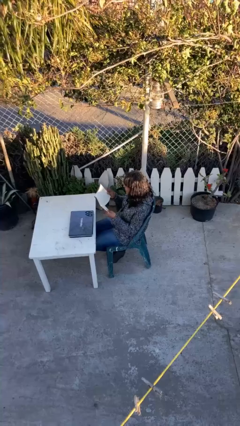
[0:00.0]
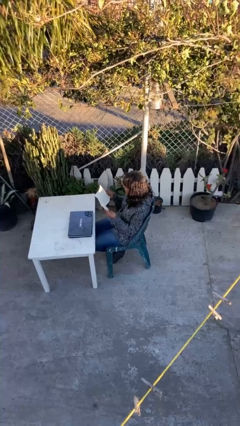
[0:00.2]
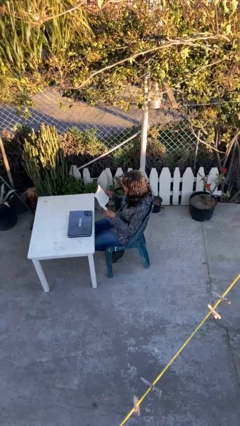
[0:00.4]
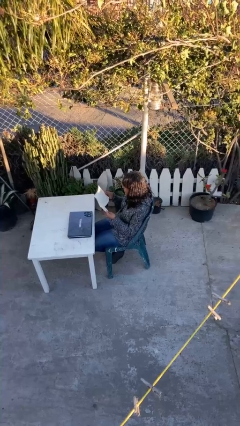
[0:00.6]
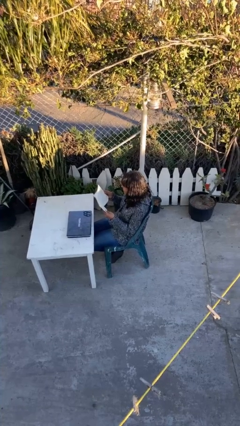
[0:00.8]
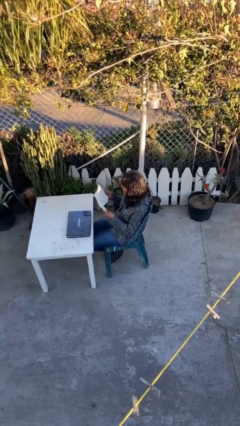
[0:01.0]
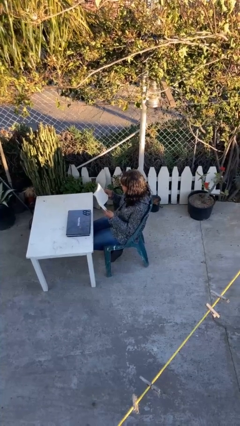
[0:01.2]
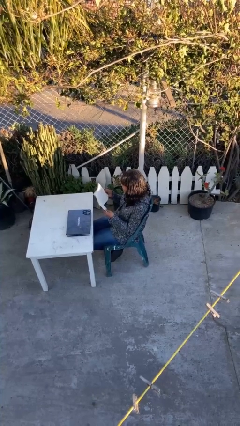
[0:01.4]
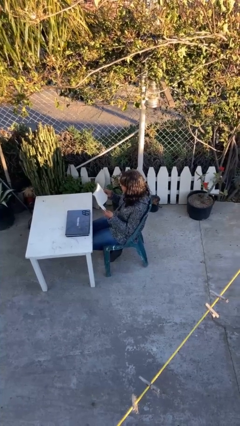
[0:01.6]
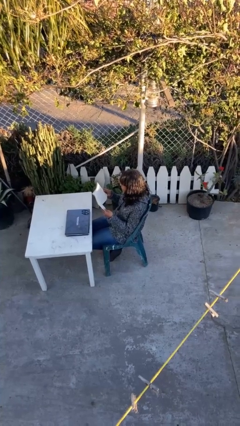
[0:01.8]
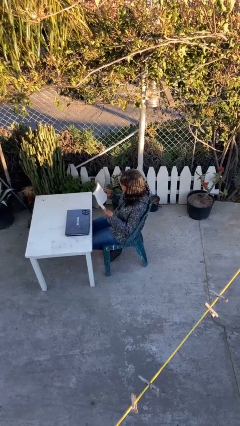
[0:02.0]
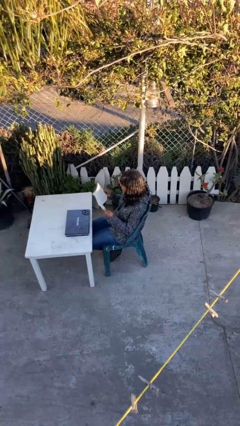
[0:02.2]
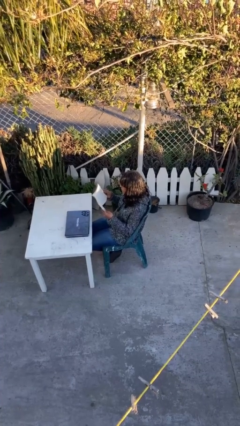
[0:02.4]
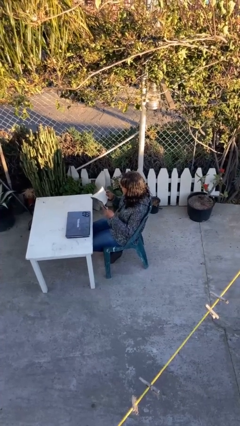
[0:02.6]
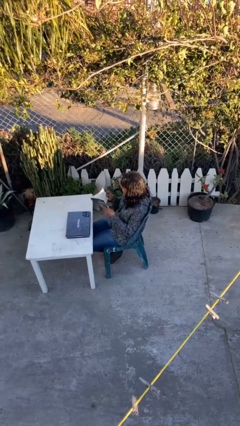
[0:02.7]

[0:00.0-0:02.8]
person reads document

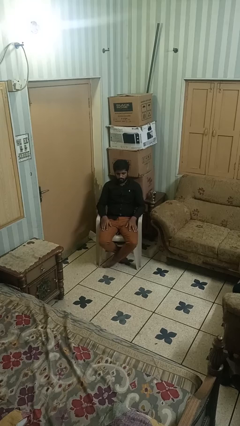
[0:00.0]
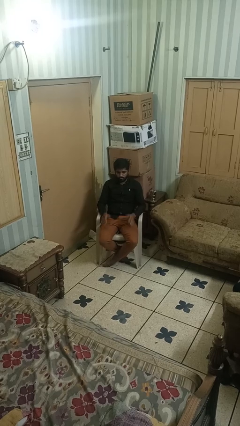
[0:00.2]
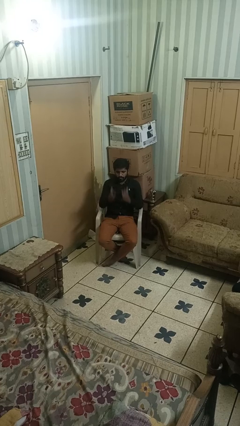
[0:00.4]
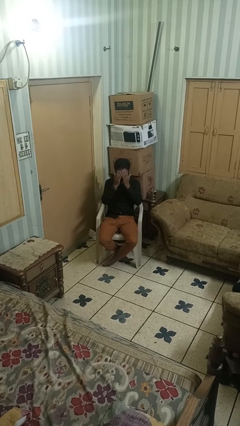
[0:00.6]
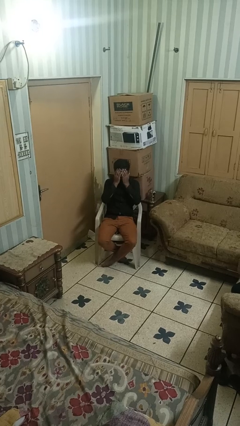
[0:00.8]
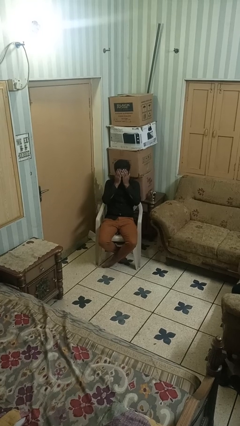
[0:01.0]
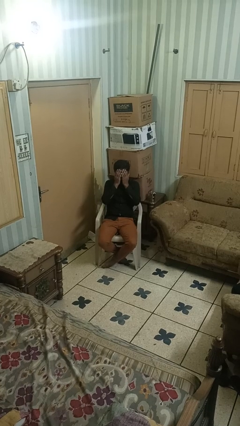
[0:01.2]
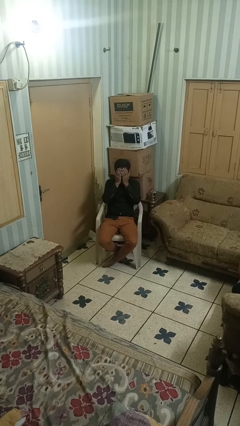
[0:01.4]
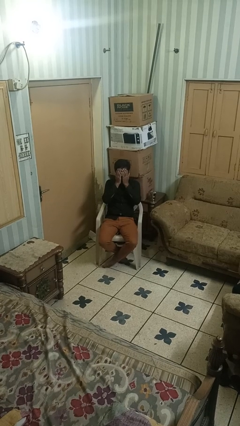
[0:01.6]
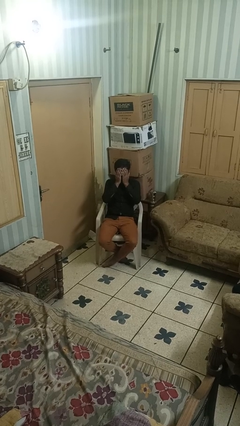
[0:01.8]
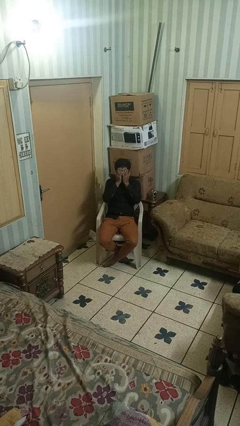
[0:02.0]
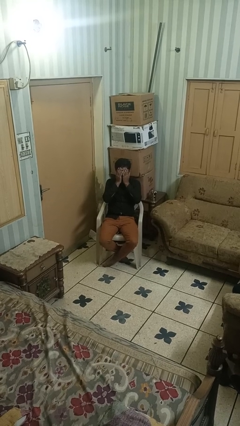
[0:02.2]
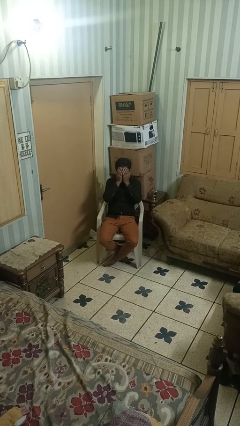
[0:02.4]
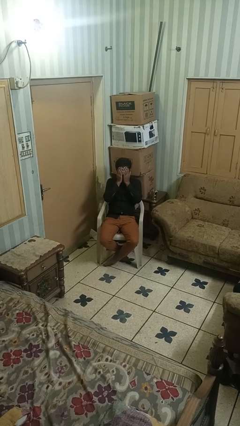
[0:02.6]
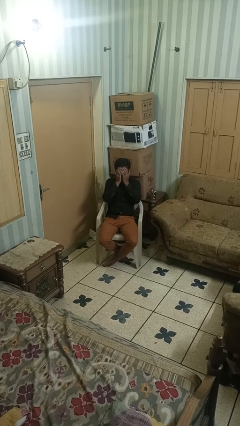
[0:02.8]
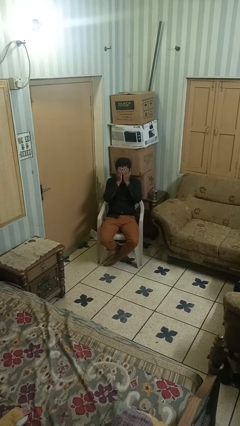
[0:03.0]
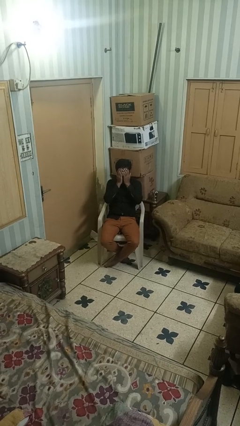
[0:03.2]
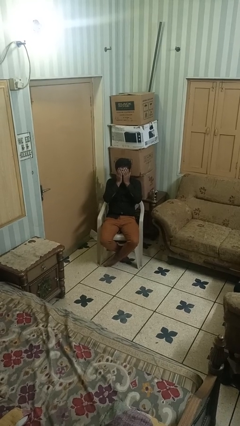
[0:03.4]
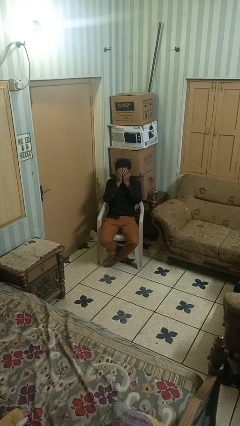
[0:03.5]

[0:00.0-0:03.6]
person covers face with hands

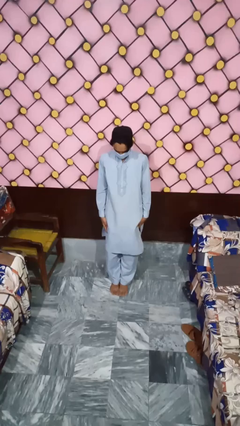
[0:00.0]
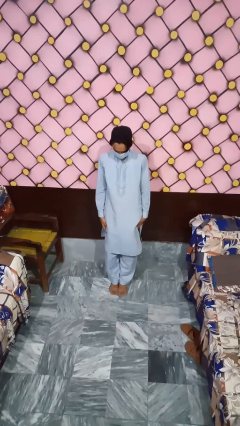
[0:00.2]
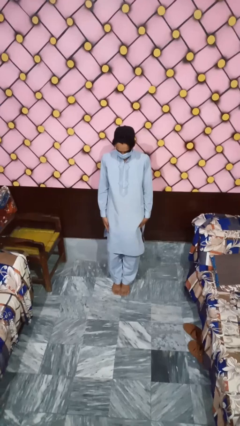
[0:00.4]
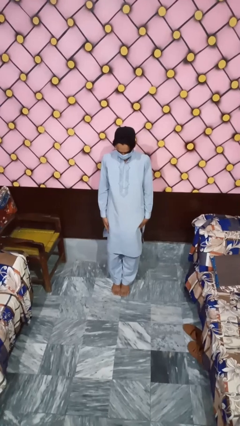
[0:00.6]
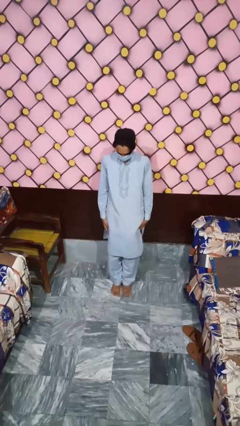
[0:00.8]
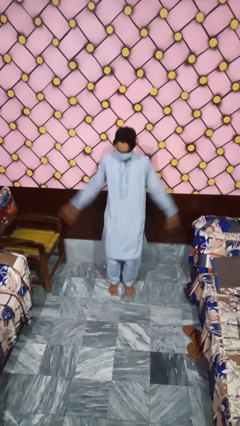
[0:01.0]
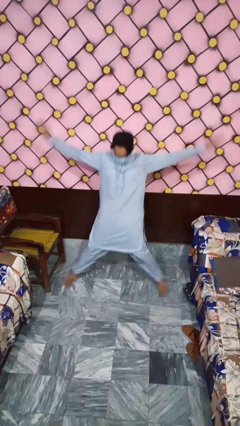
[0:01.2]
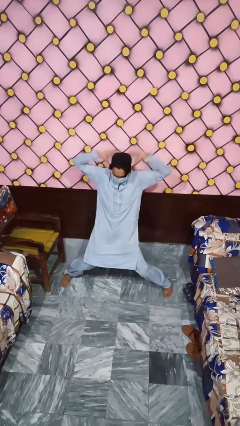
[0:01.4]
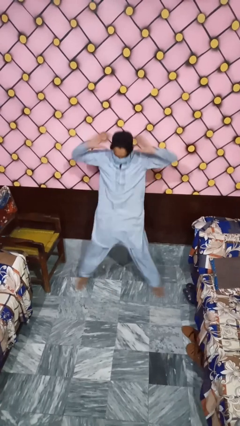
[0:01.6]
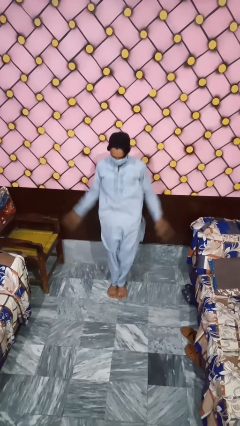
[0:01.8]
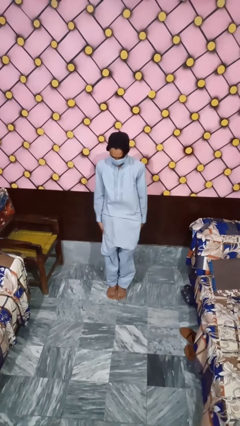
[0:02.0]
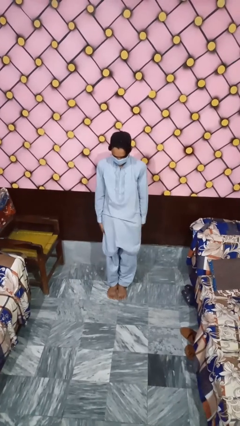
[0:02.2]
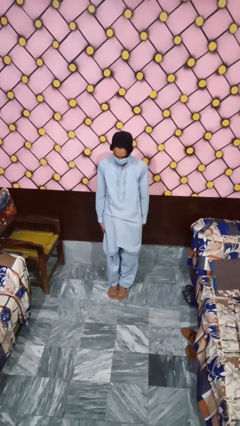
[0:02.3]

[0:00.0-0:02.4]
person exercises with jumping jacks

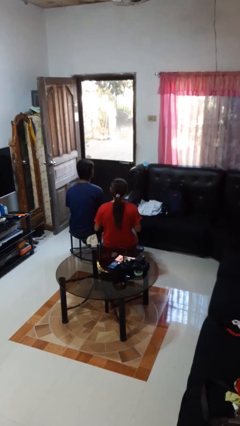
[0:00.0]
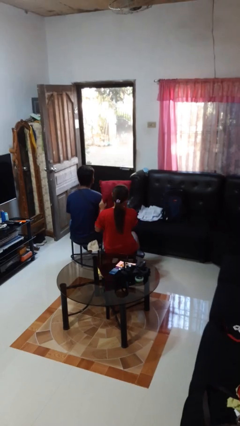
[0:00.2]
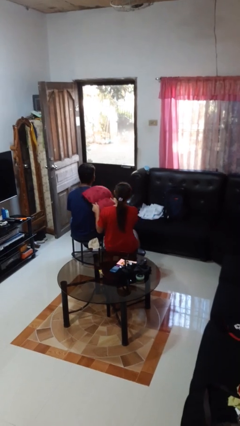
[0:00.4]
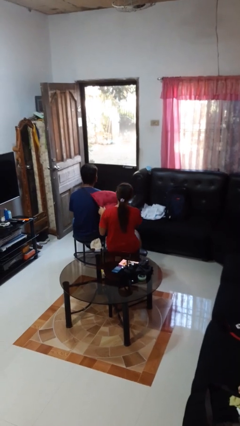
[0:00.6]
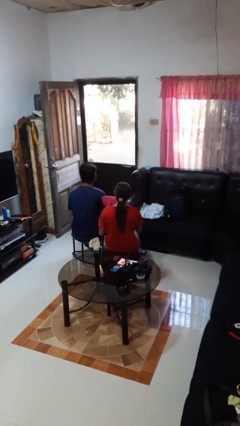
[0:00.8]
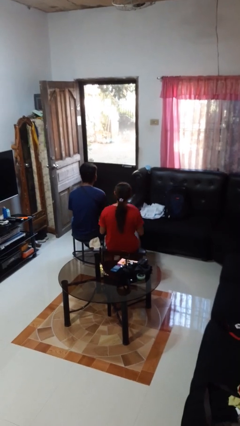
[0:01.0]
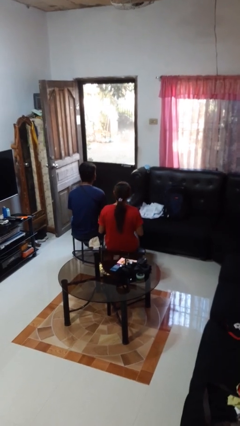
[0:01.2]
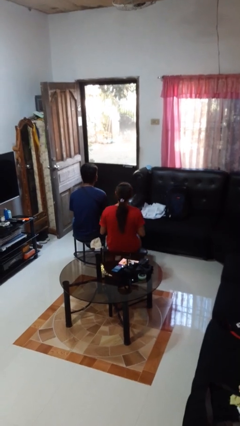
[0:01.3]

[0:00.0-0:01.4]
person hits person with pillow

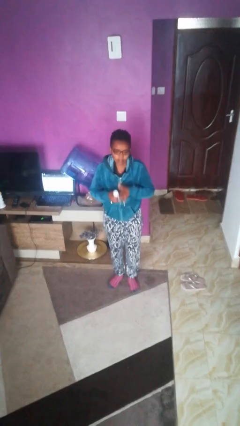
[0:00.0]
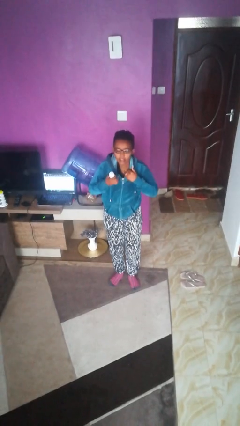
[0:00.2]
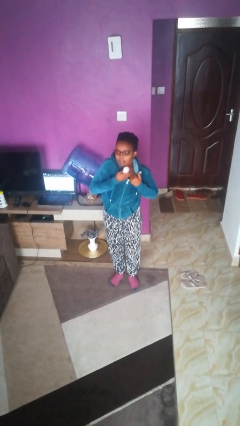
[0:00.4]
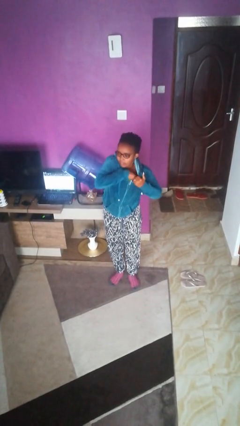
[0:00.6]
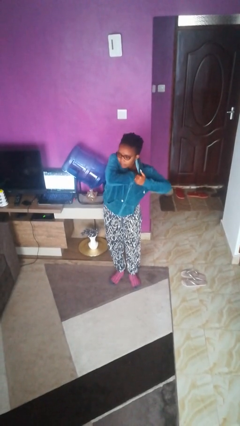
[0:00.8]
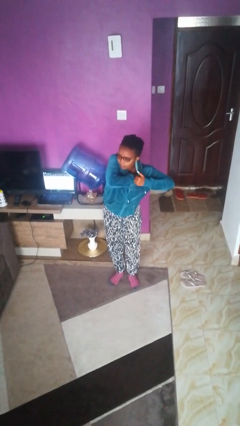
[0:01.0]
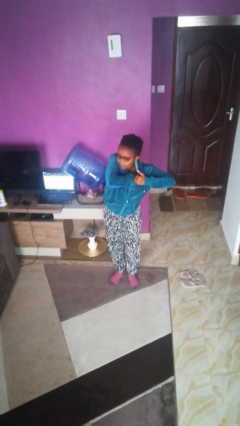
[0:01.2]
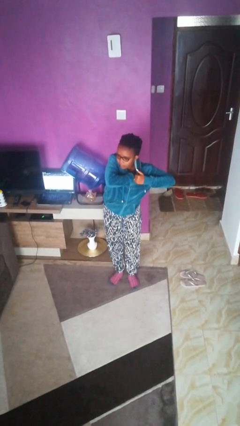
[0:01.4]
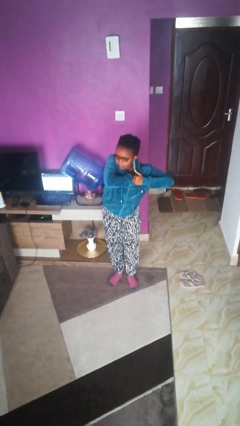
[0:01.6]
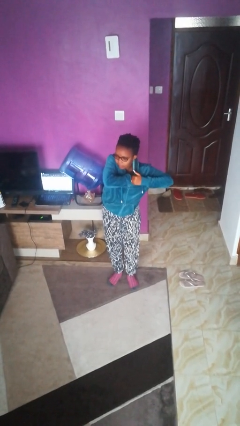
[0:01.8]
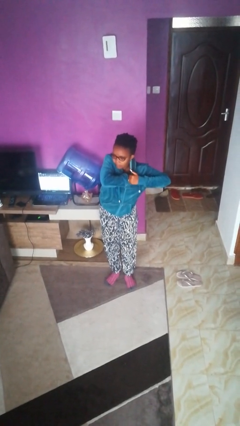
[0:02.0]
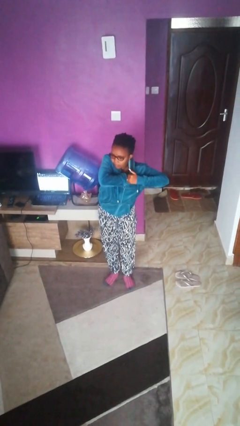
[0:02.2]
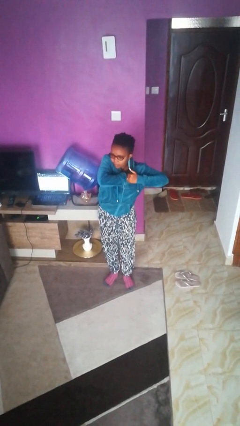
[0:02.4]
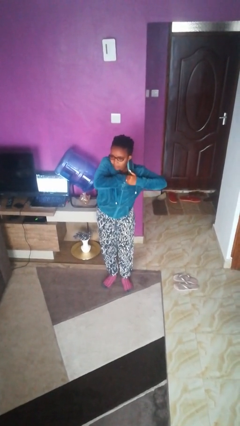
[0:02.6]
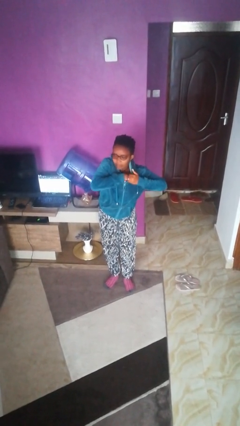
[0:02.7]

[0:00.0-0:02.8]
person applies deodorant

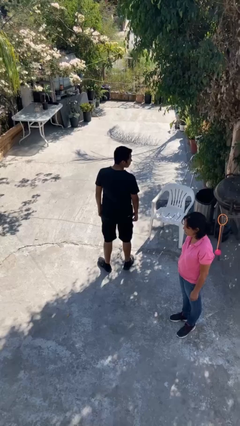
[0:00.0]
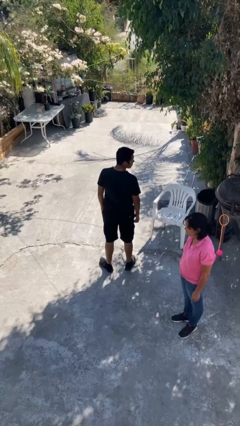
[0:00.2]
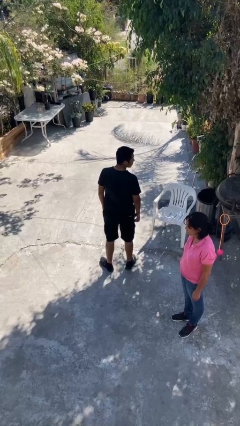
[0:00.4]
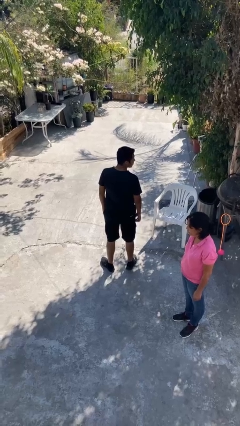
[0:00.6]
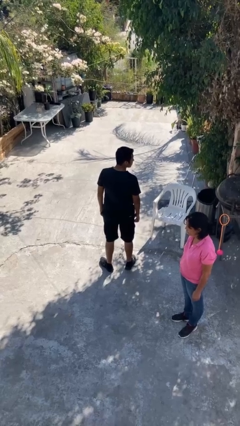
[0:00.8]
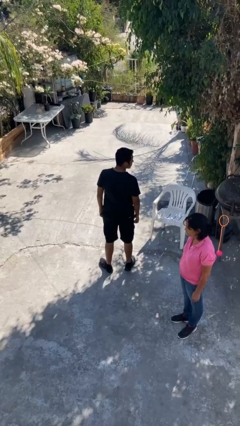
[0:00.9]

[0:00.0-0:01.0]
person looks over shoulder

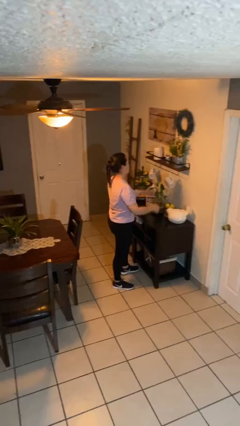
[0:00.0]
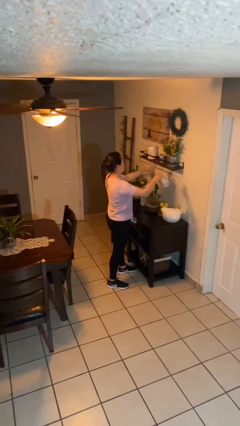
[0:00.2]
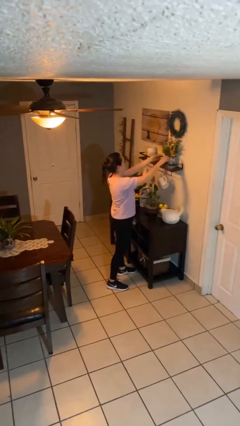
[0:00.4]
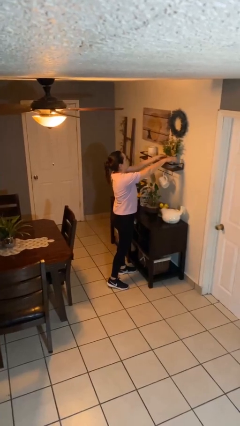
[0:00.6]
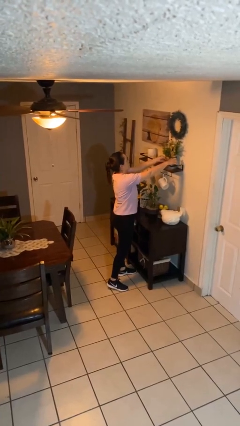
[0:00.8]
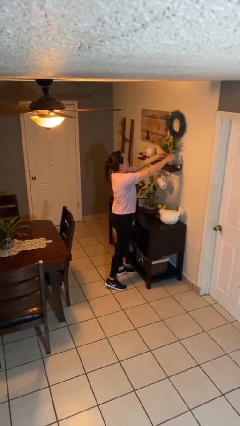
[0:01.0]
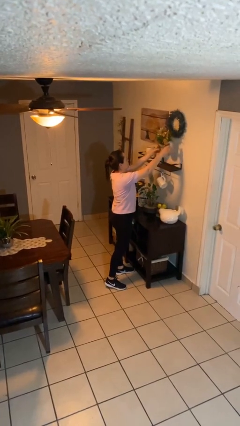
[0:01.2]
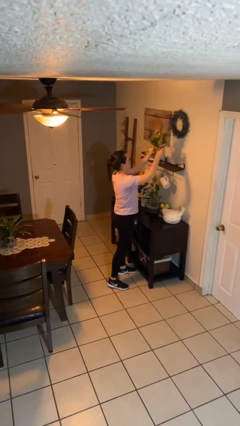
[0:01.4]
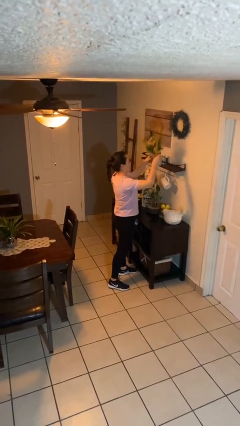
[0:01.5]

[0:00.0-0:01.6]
person picks up object from countertop

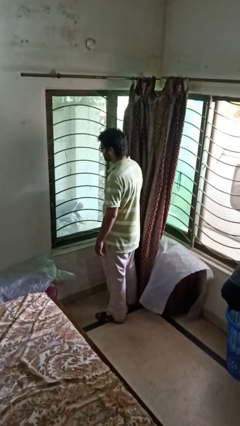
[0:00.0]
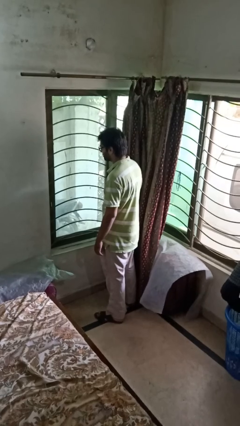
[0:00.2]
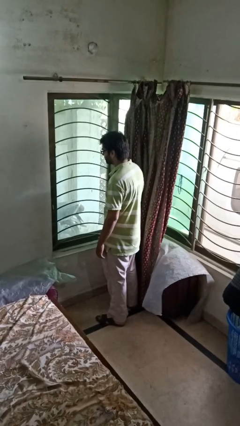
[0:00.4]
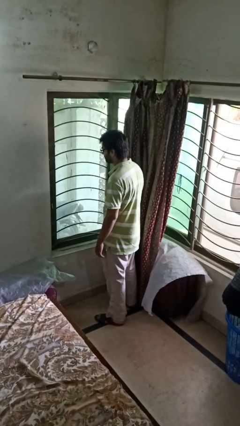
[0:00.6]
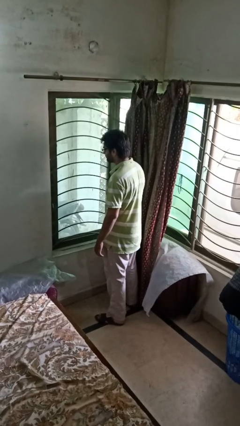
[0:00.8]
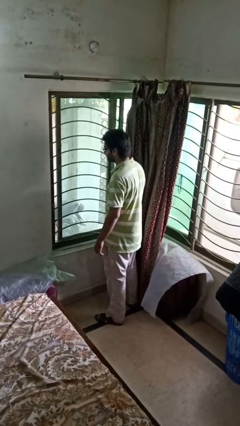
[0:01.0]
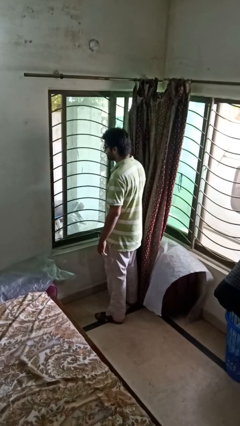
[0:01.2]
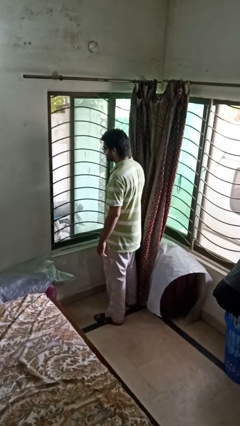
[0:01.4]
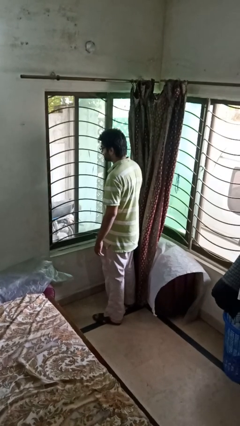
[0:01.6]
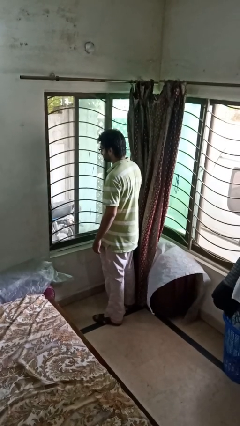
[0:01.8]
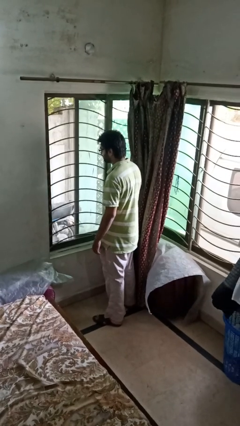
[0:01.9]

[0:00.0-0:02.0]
person opens home window
